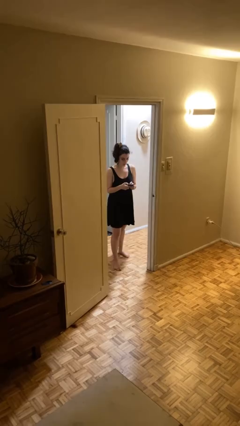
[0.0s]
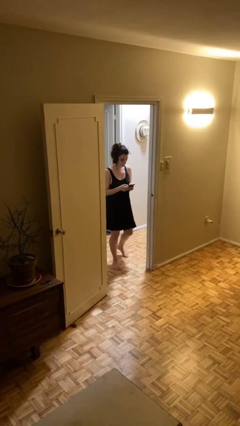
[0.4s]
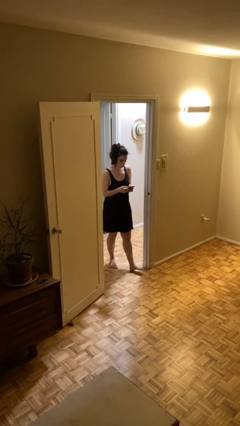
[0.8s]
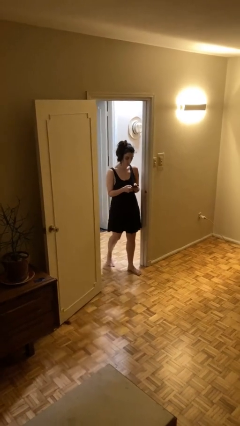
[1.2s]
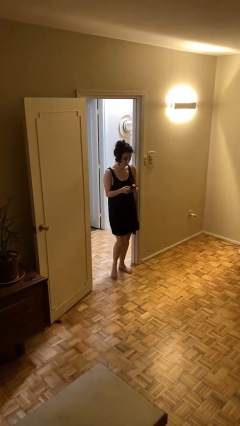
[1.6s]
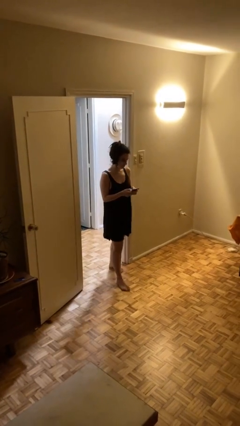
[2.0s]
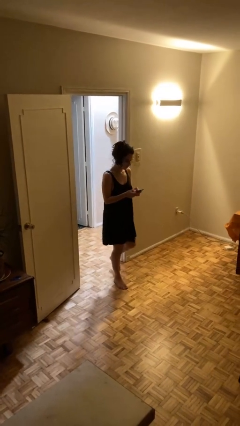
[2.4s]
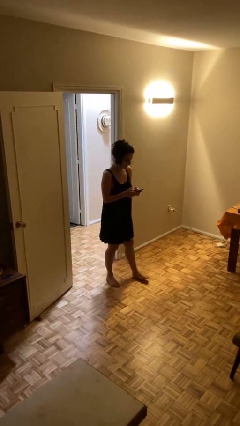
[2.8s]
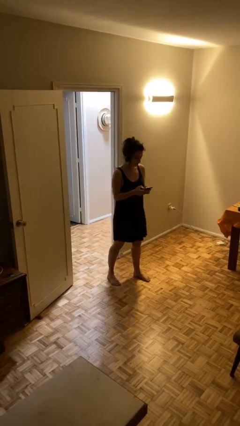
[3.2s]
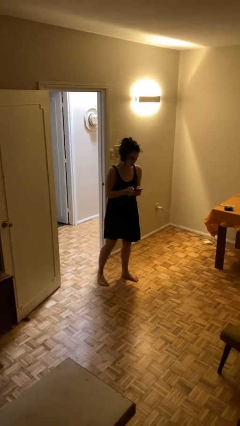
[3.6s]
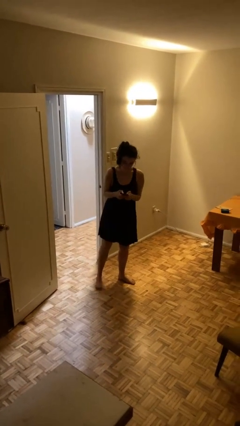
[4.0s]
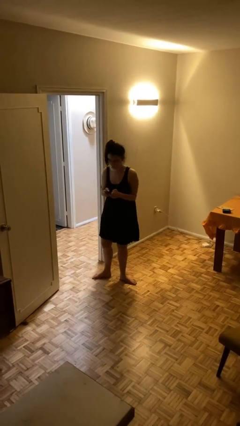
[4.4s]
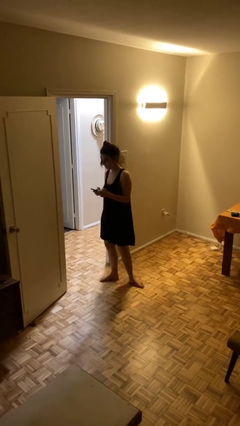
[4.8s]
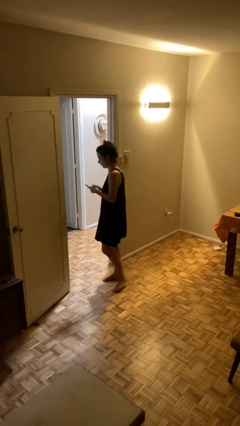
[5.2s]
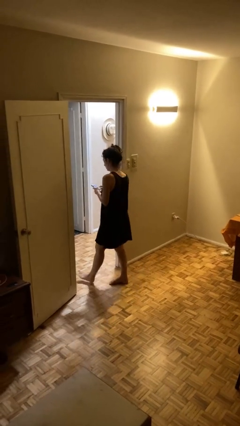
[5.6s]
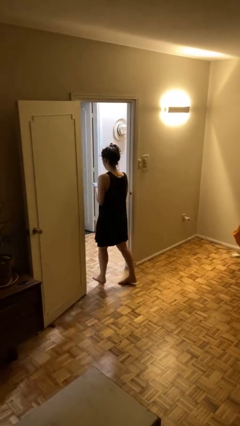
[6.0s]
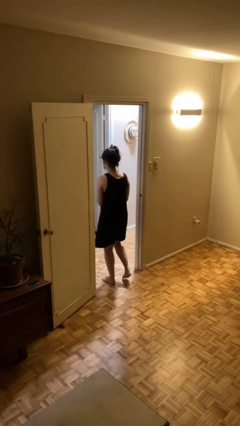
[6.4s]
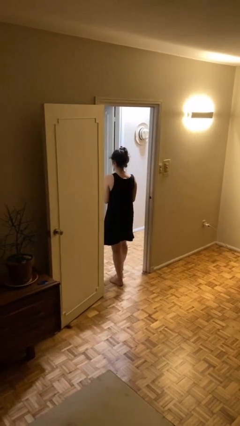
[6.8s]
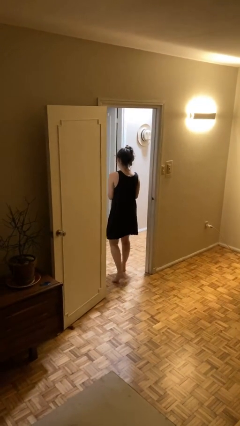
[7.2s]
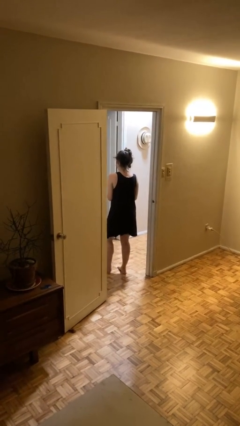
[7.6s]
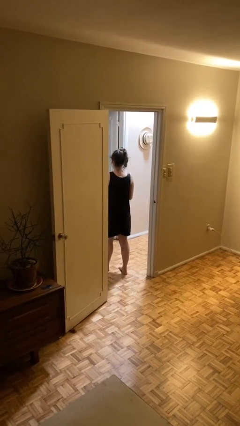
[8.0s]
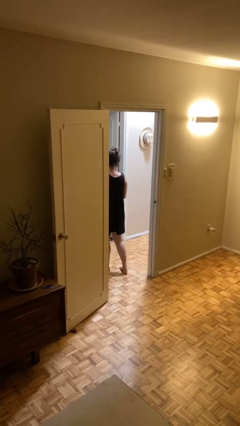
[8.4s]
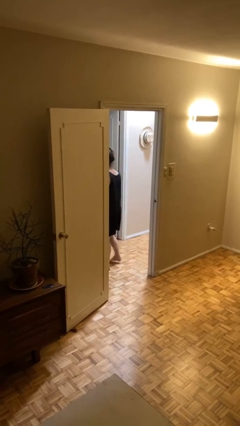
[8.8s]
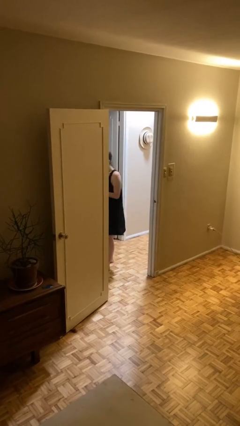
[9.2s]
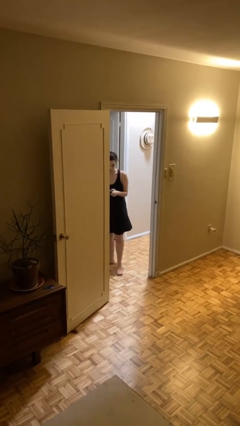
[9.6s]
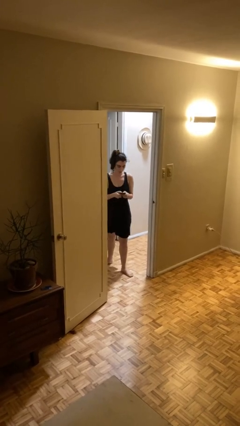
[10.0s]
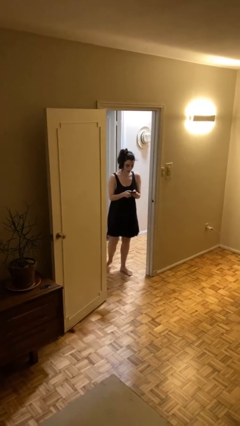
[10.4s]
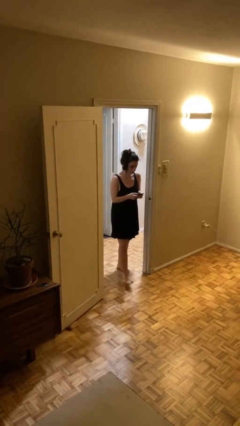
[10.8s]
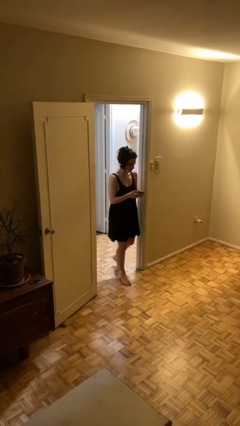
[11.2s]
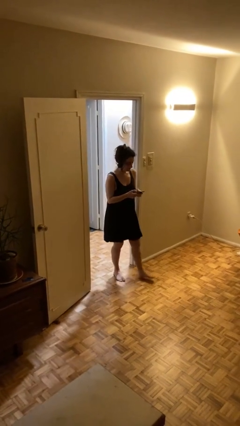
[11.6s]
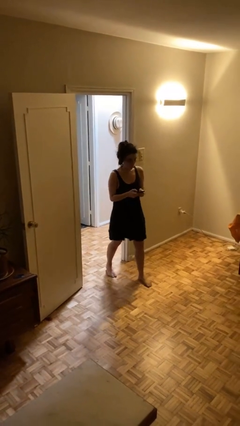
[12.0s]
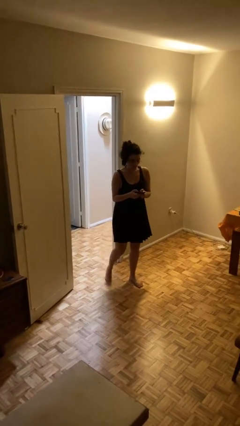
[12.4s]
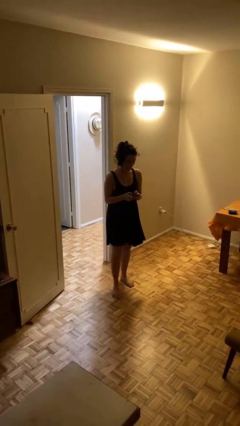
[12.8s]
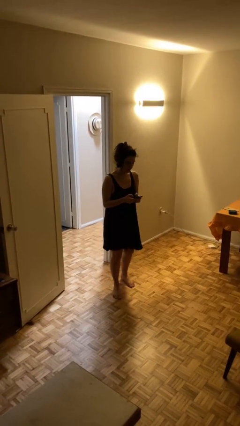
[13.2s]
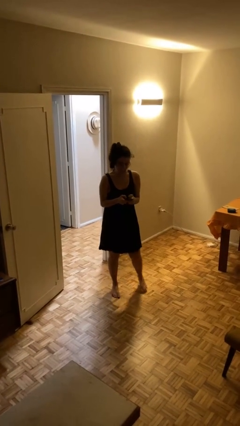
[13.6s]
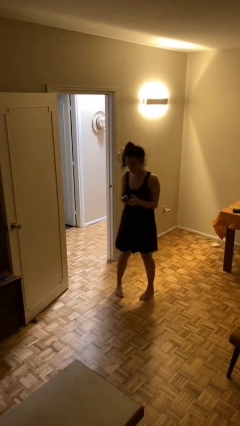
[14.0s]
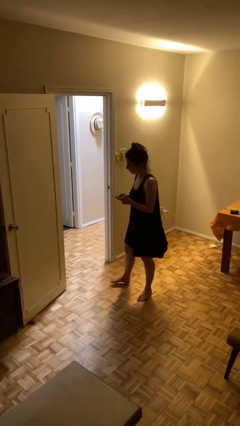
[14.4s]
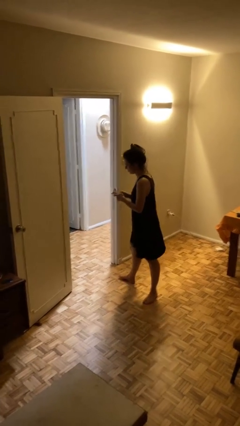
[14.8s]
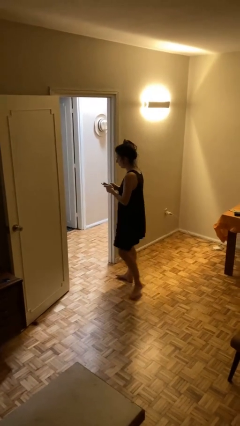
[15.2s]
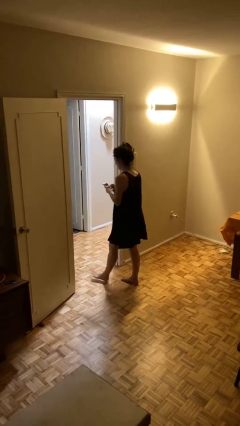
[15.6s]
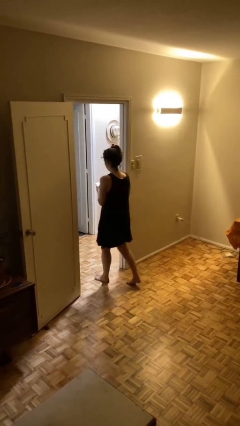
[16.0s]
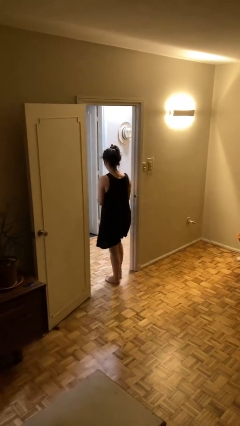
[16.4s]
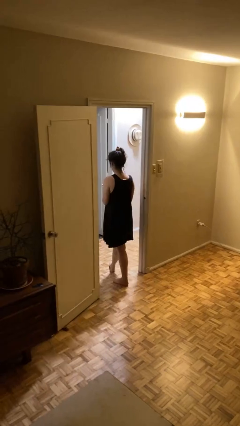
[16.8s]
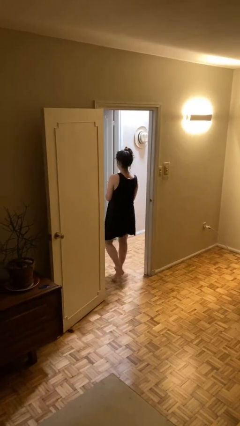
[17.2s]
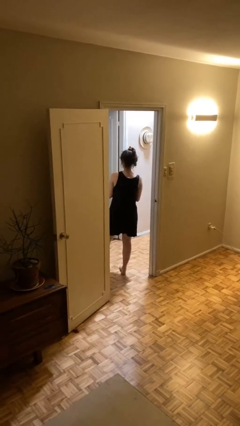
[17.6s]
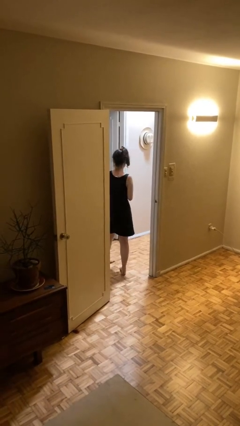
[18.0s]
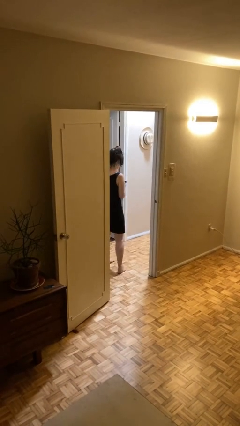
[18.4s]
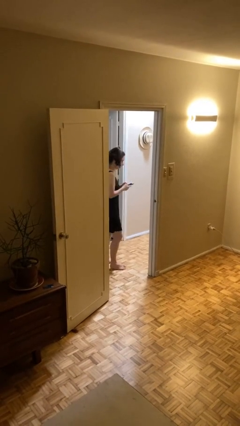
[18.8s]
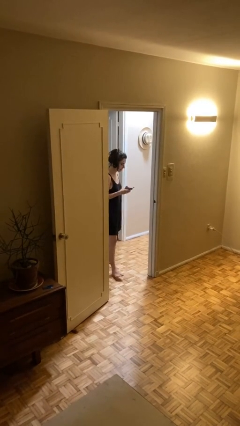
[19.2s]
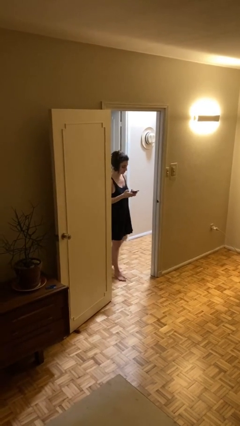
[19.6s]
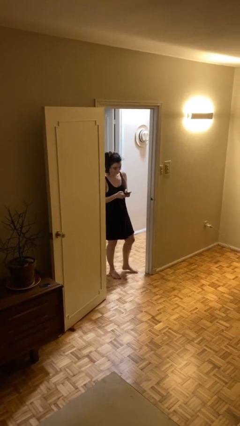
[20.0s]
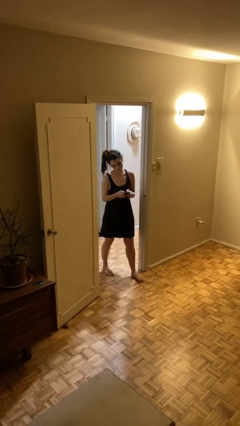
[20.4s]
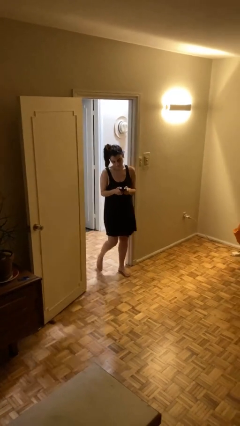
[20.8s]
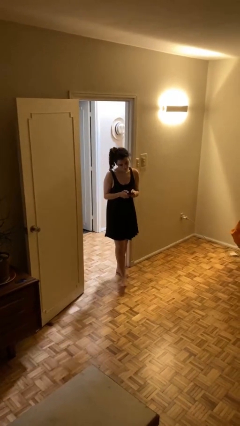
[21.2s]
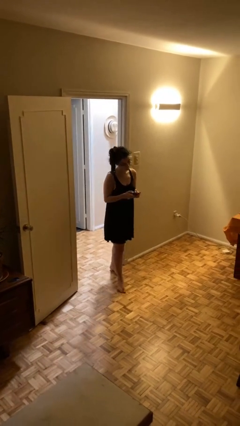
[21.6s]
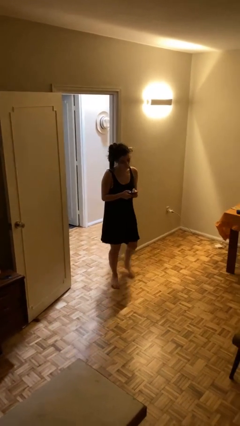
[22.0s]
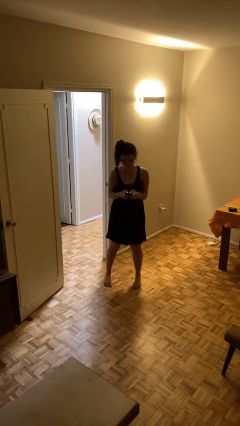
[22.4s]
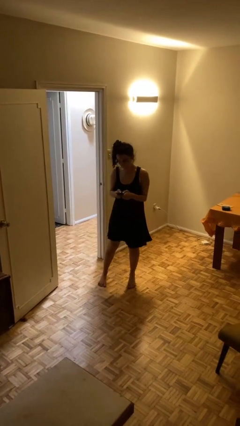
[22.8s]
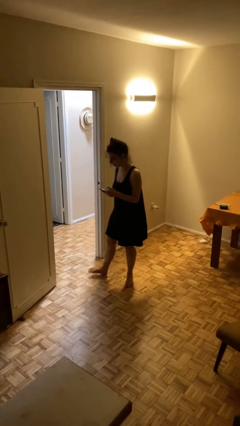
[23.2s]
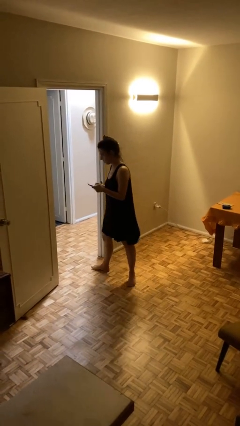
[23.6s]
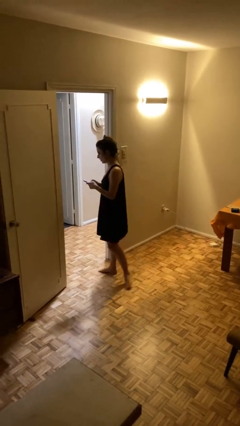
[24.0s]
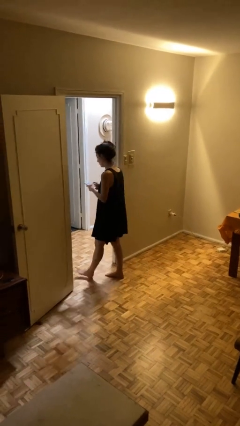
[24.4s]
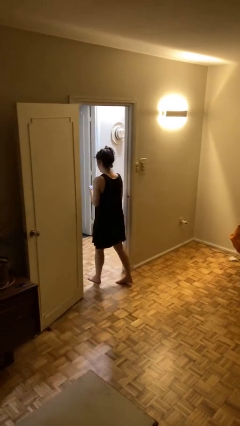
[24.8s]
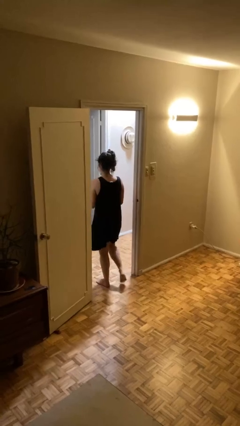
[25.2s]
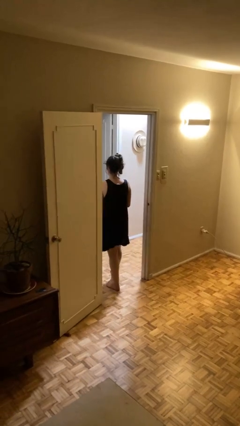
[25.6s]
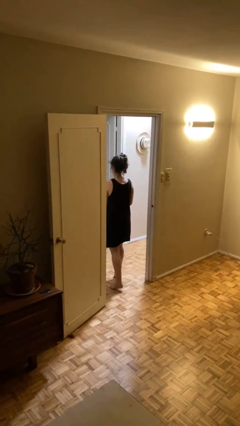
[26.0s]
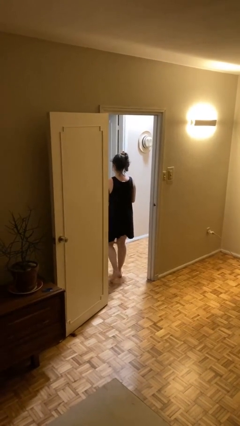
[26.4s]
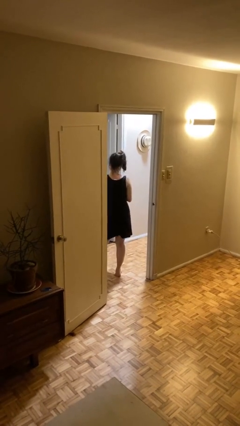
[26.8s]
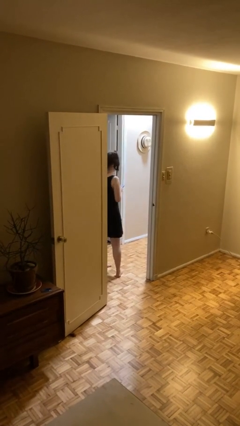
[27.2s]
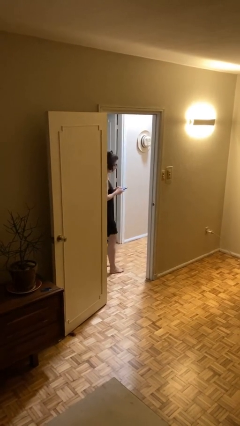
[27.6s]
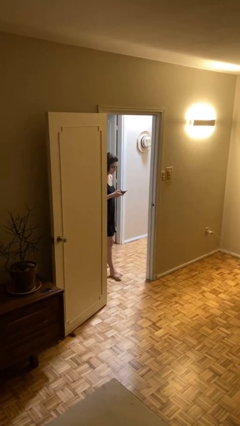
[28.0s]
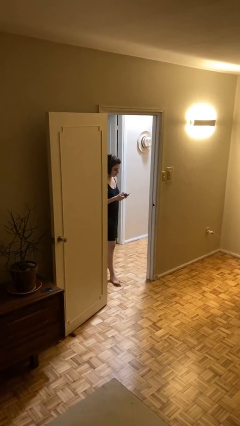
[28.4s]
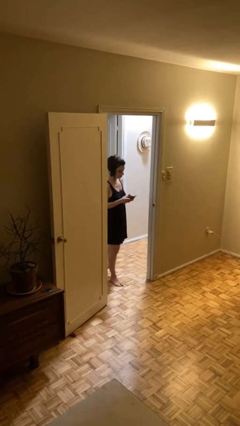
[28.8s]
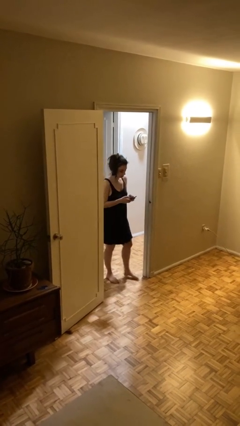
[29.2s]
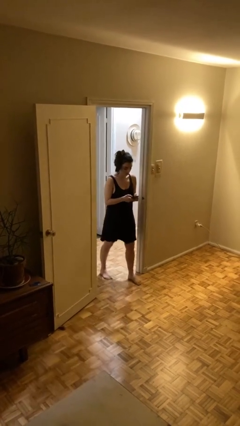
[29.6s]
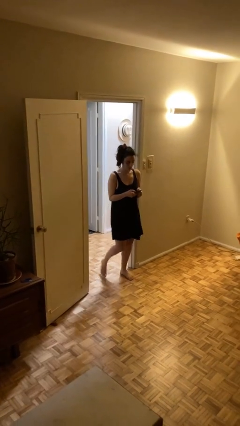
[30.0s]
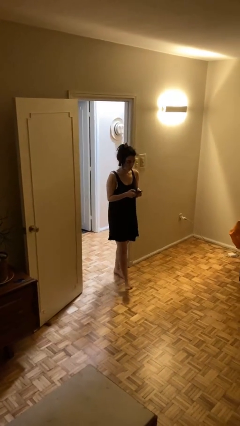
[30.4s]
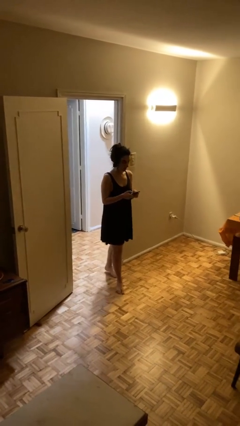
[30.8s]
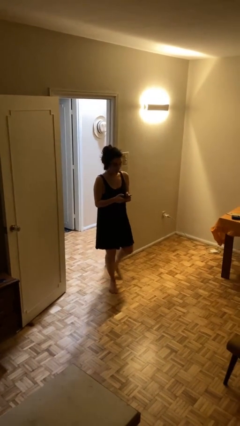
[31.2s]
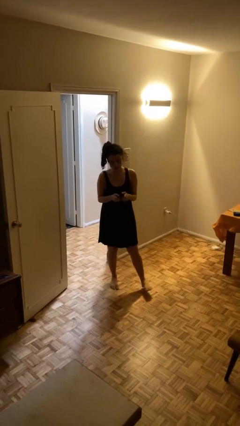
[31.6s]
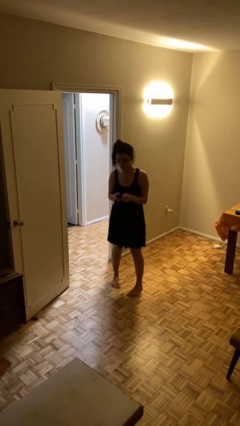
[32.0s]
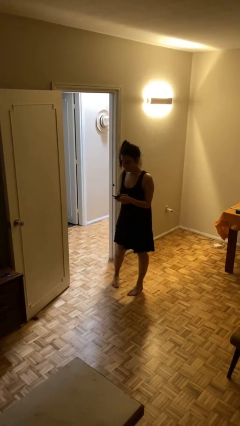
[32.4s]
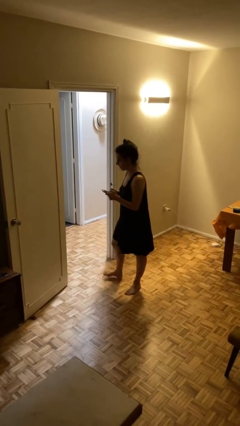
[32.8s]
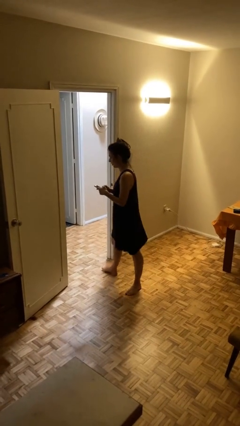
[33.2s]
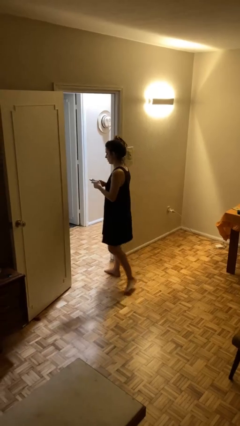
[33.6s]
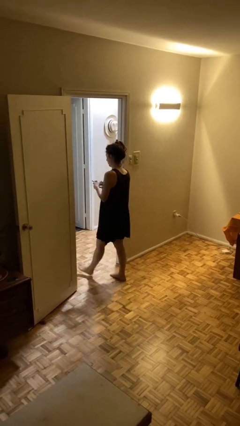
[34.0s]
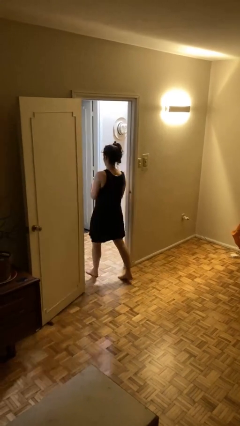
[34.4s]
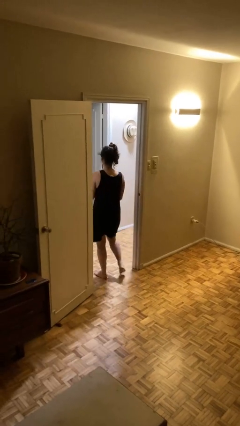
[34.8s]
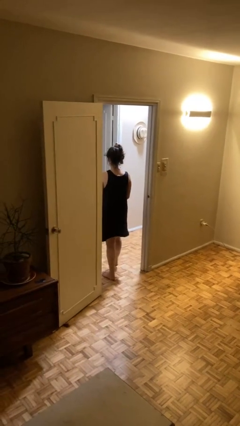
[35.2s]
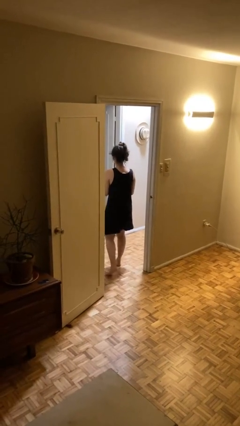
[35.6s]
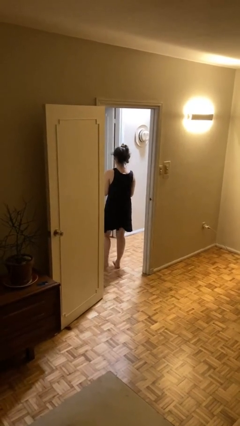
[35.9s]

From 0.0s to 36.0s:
person texts on phone

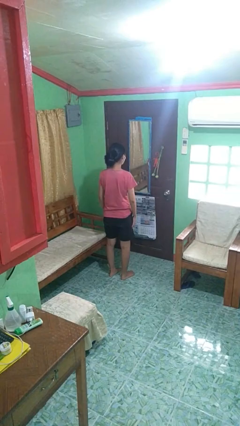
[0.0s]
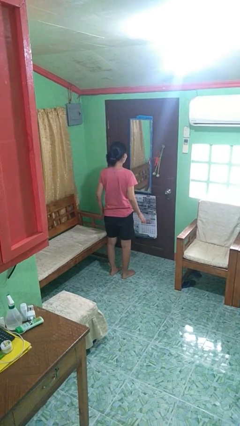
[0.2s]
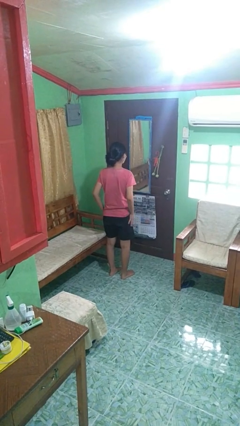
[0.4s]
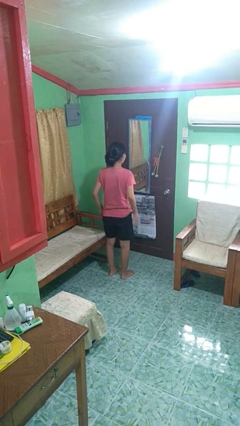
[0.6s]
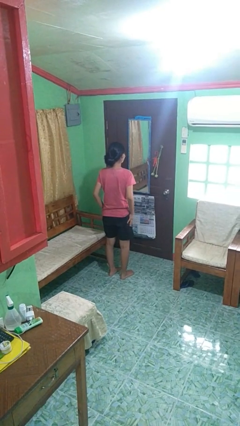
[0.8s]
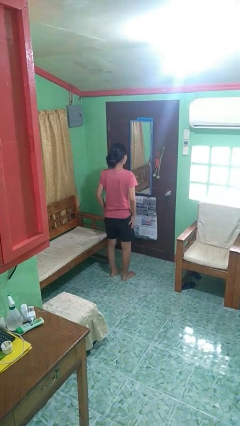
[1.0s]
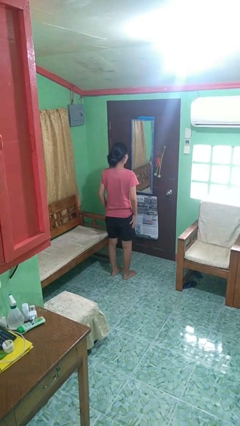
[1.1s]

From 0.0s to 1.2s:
person slaps hands on thighs
